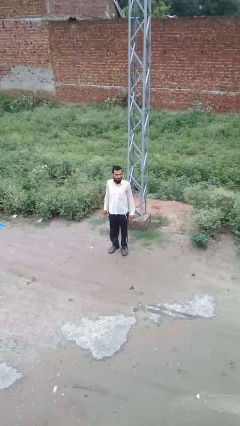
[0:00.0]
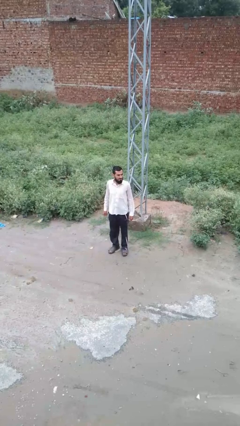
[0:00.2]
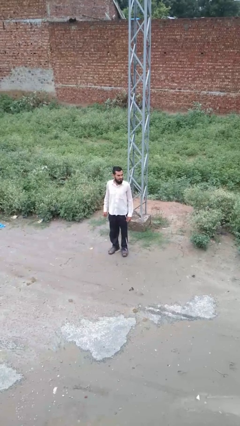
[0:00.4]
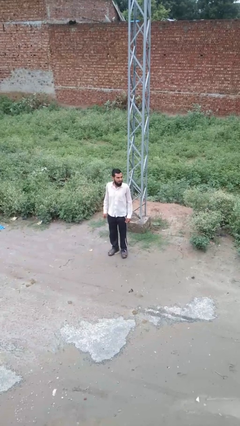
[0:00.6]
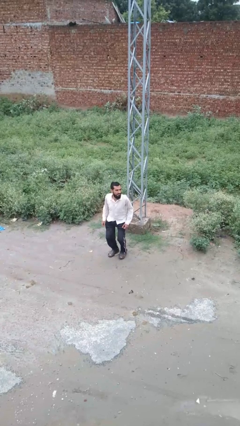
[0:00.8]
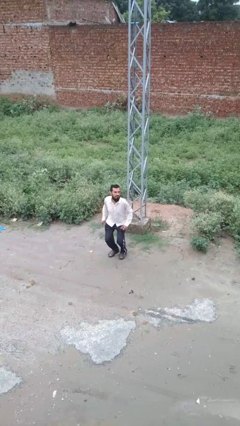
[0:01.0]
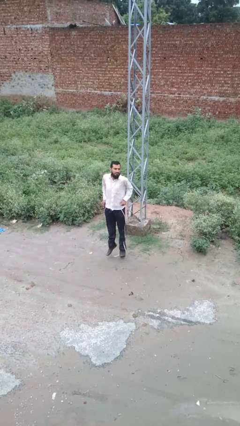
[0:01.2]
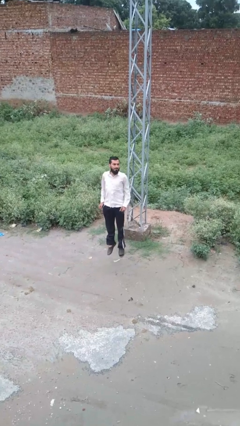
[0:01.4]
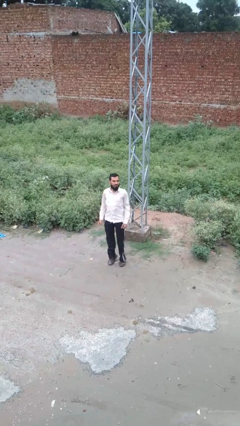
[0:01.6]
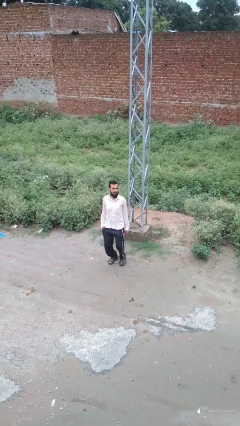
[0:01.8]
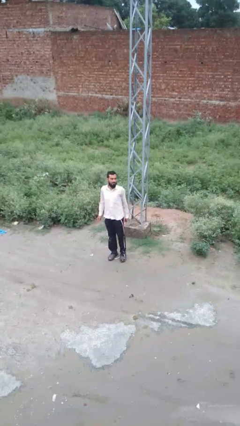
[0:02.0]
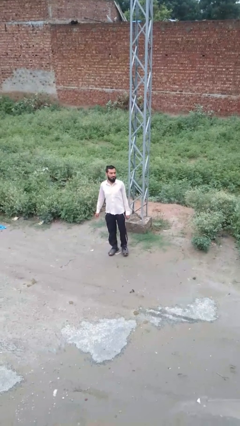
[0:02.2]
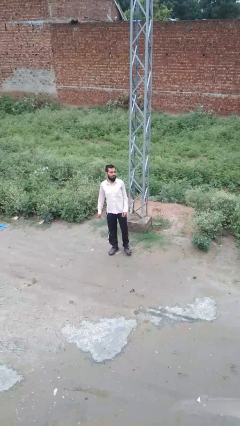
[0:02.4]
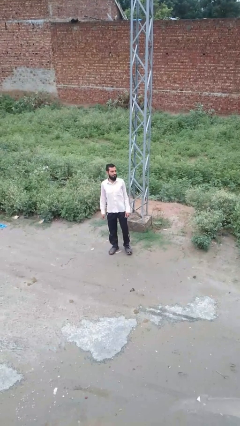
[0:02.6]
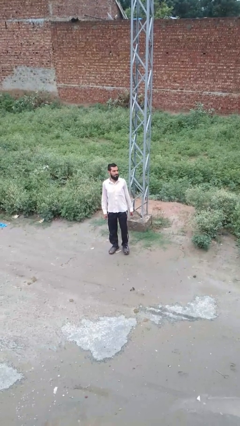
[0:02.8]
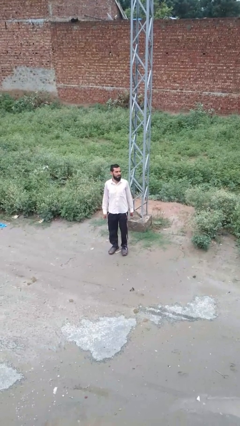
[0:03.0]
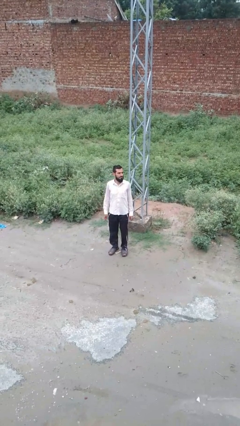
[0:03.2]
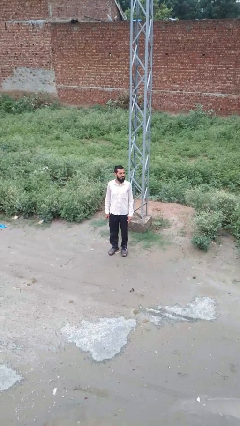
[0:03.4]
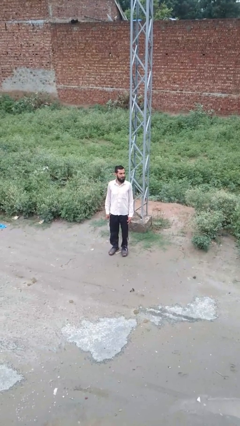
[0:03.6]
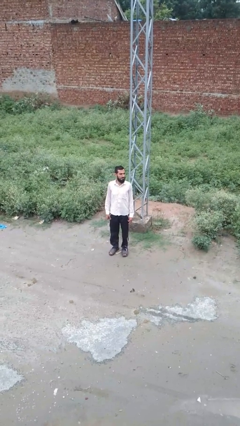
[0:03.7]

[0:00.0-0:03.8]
person jumps

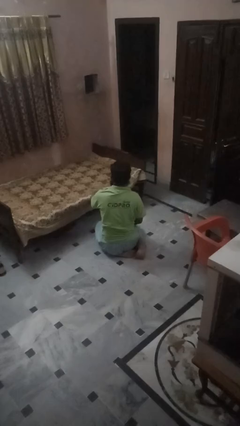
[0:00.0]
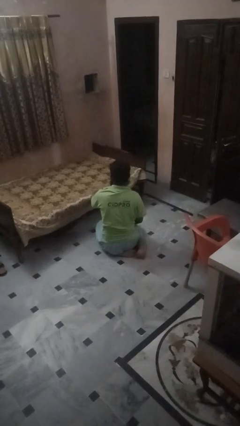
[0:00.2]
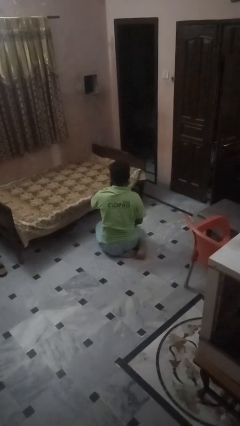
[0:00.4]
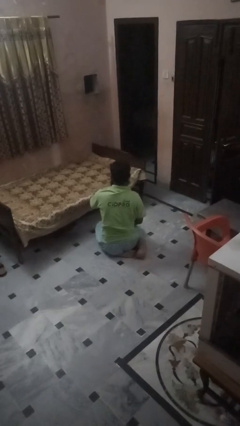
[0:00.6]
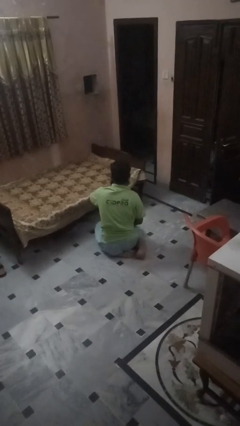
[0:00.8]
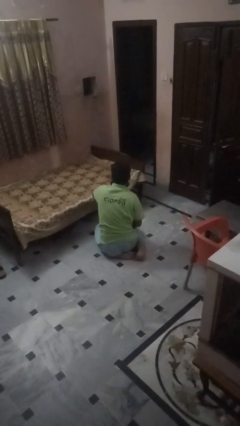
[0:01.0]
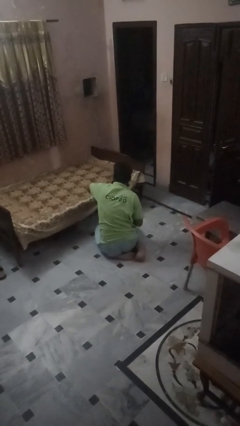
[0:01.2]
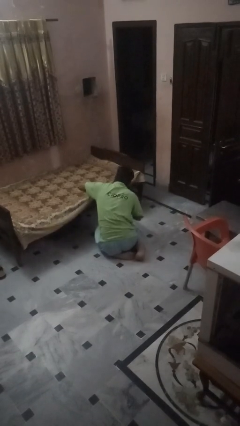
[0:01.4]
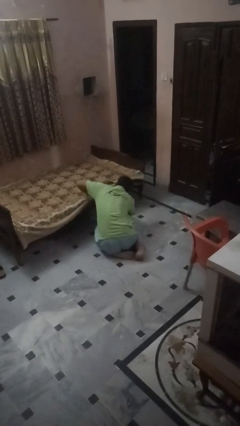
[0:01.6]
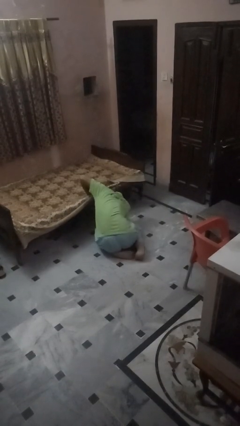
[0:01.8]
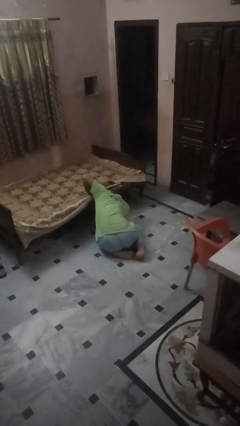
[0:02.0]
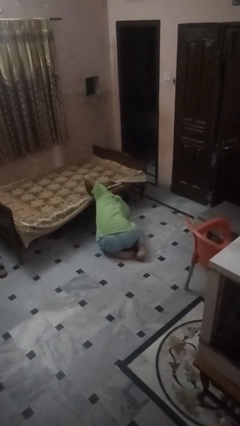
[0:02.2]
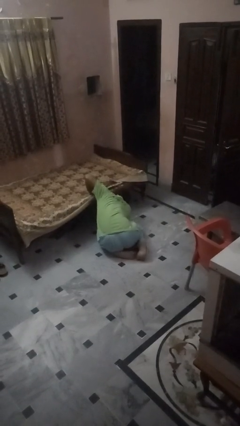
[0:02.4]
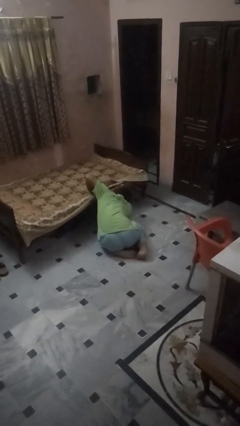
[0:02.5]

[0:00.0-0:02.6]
person searches under bed

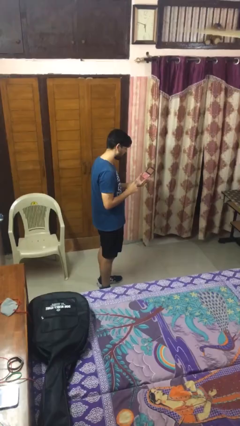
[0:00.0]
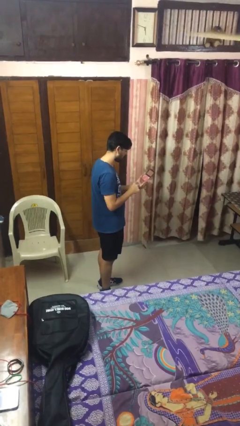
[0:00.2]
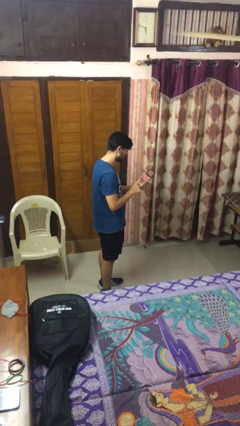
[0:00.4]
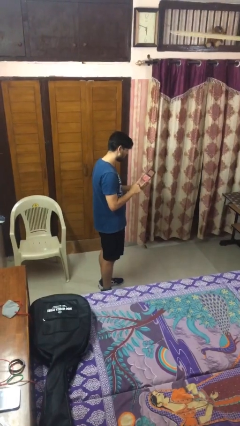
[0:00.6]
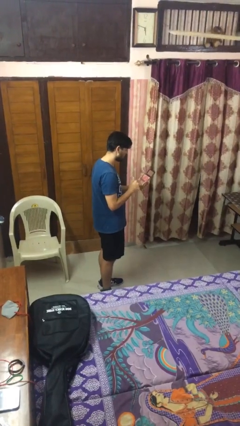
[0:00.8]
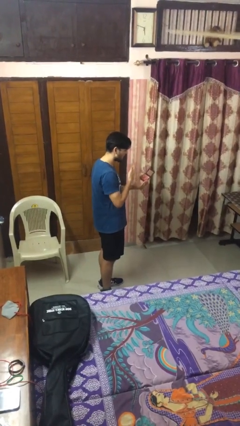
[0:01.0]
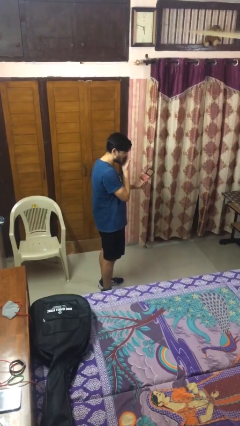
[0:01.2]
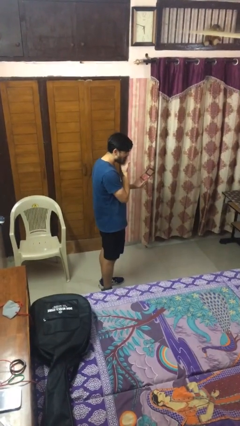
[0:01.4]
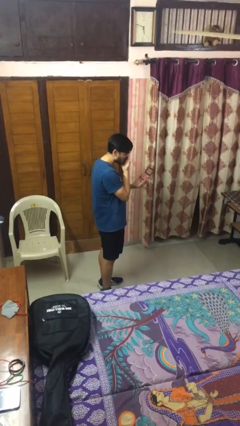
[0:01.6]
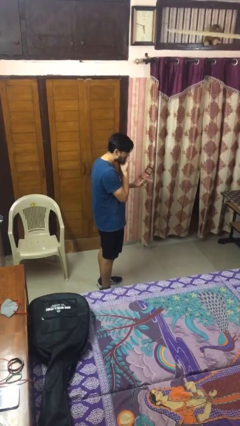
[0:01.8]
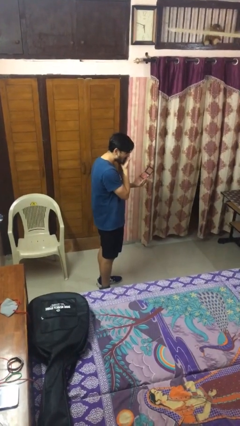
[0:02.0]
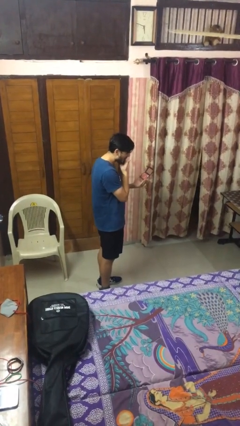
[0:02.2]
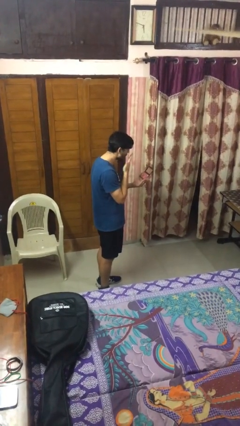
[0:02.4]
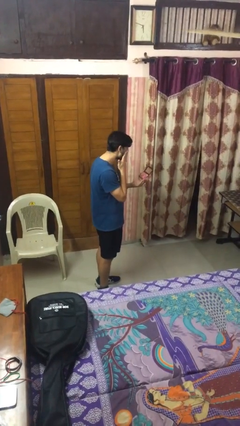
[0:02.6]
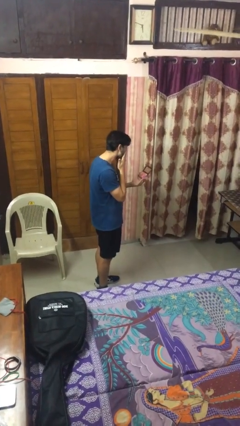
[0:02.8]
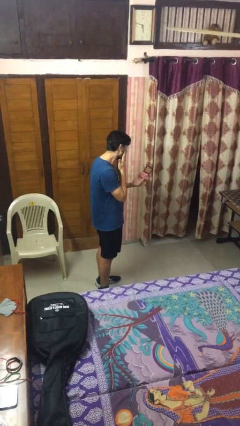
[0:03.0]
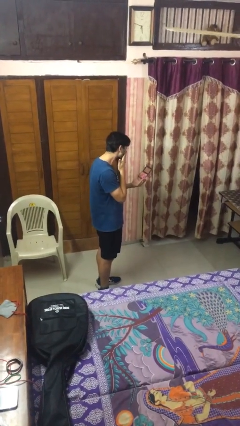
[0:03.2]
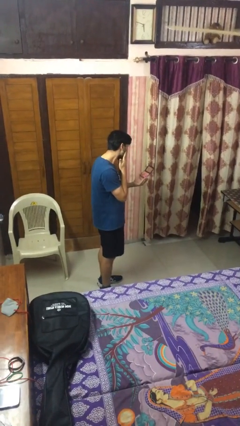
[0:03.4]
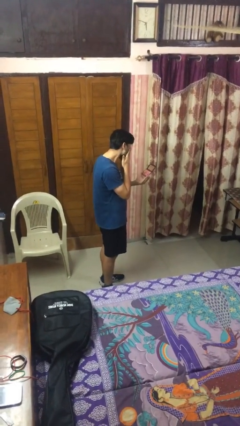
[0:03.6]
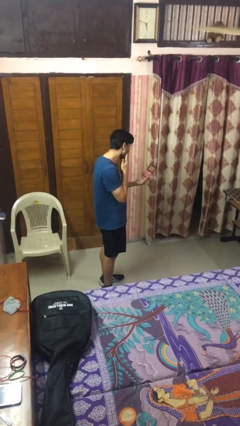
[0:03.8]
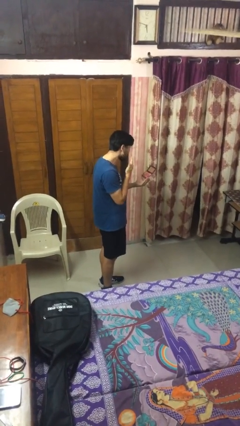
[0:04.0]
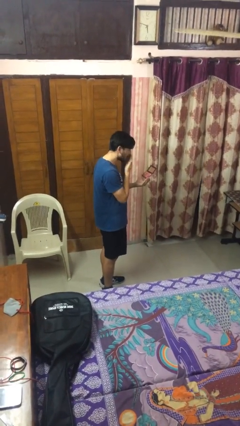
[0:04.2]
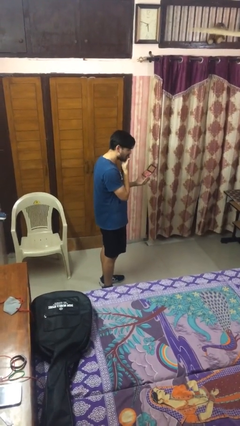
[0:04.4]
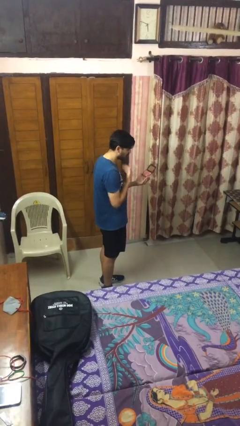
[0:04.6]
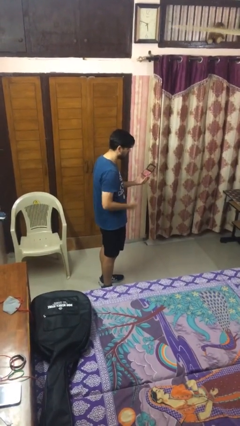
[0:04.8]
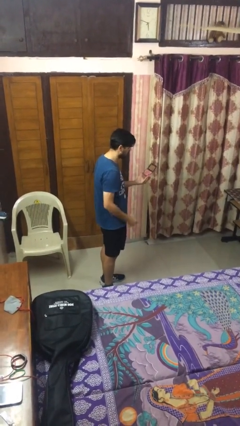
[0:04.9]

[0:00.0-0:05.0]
person applies foundation makeup

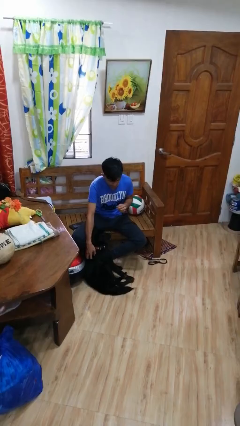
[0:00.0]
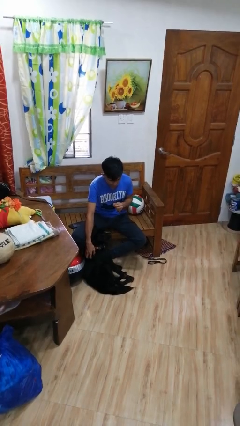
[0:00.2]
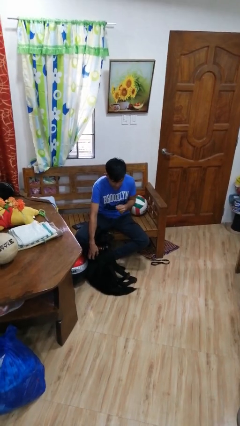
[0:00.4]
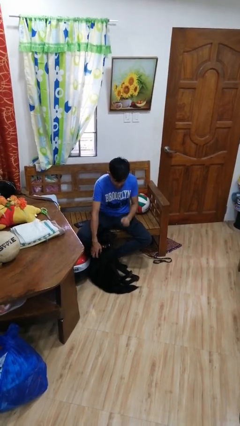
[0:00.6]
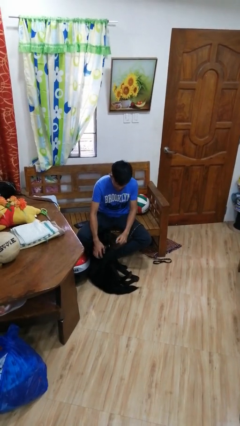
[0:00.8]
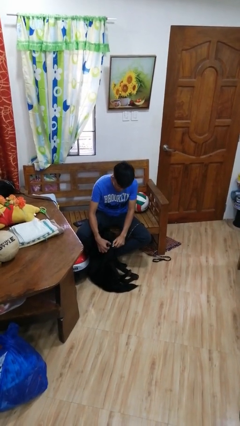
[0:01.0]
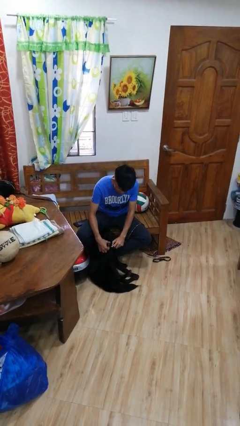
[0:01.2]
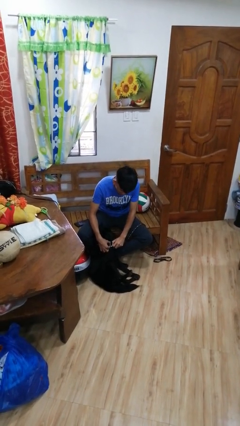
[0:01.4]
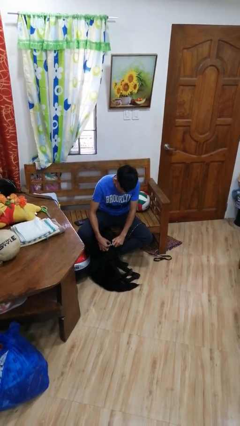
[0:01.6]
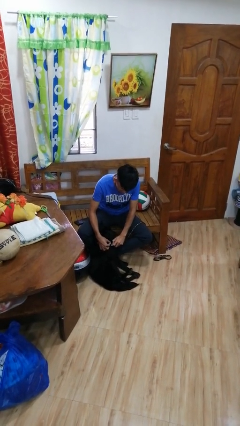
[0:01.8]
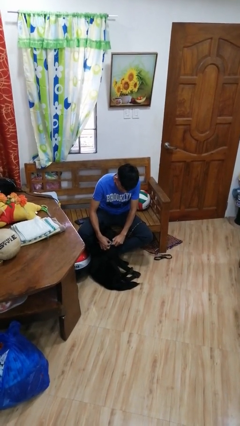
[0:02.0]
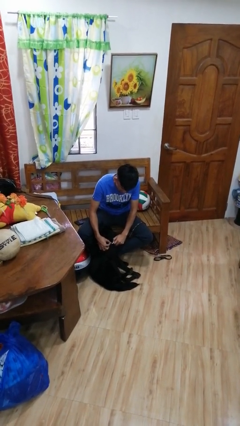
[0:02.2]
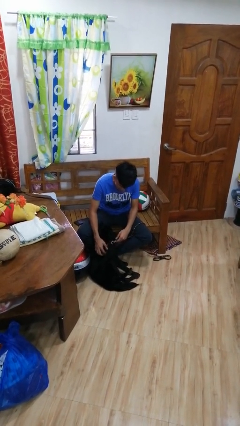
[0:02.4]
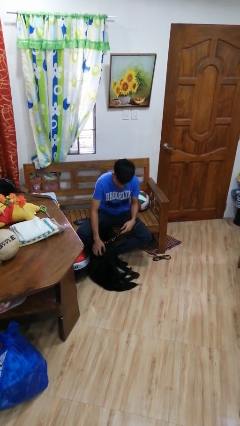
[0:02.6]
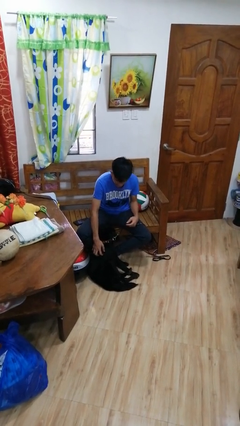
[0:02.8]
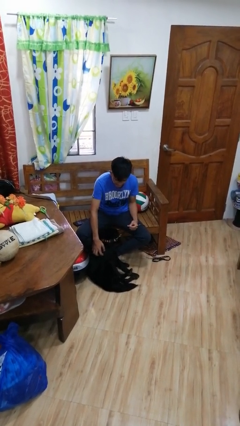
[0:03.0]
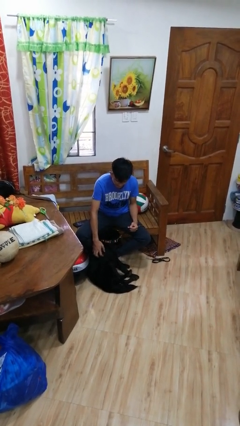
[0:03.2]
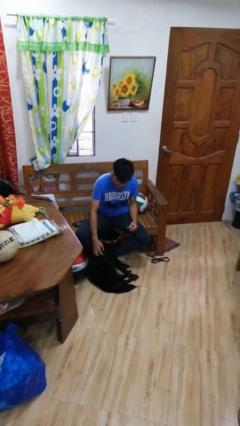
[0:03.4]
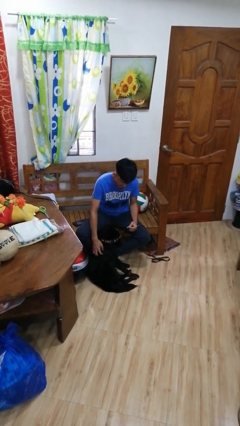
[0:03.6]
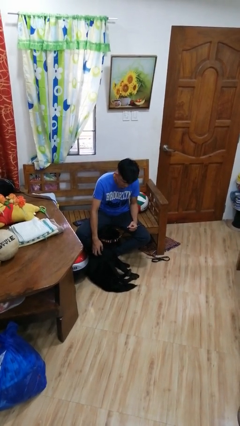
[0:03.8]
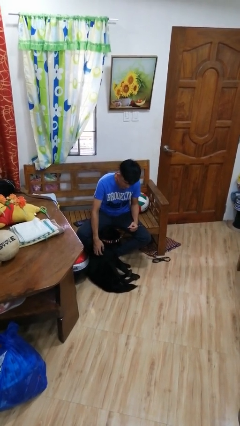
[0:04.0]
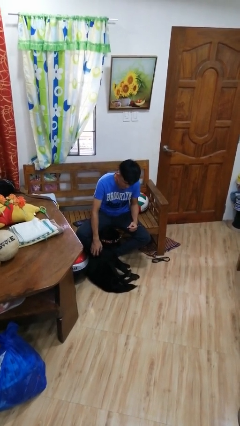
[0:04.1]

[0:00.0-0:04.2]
person attaches leash to dog

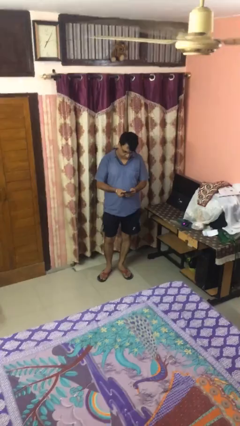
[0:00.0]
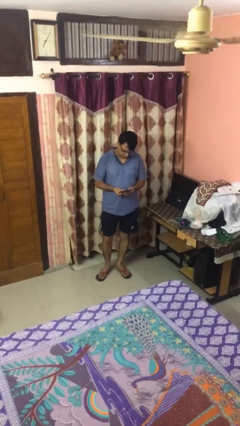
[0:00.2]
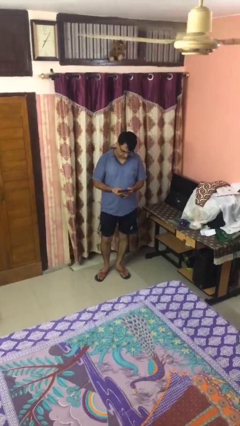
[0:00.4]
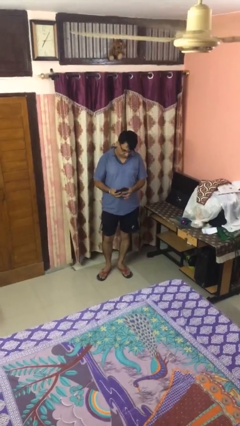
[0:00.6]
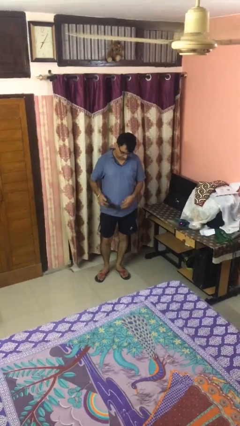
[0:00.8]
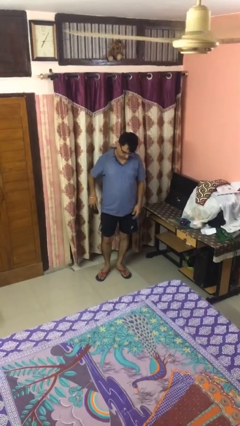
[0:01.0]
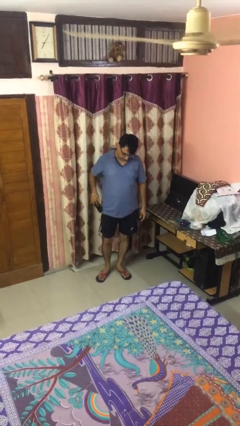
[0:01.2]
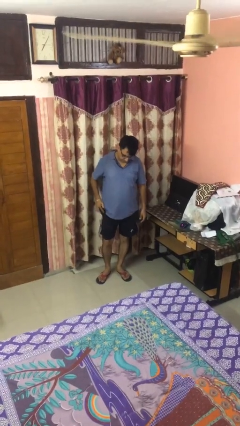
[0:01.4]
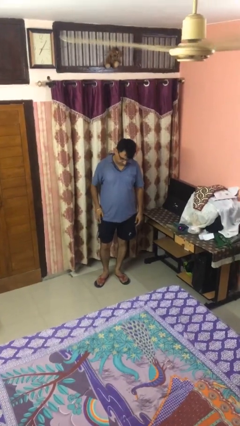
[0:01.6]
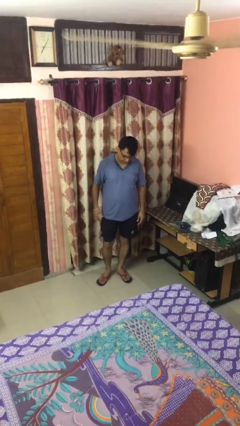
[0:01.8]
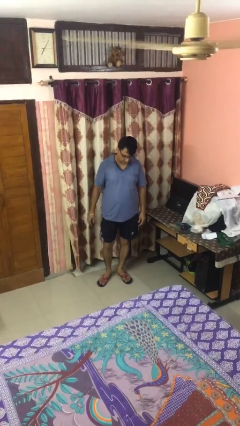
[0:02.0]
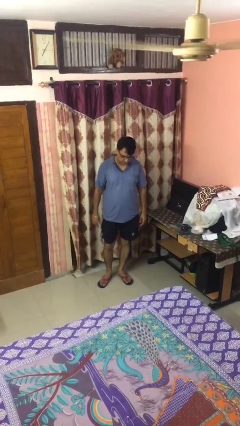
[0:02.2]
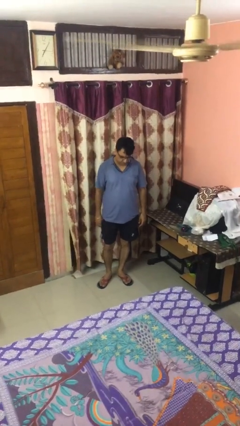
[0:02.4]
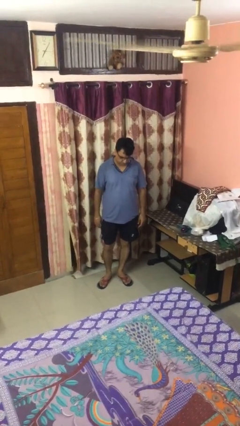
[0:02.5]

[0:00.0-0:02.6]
person puts phone into pocket
